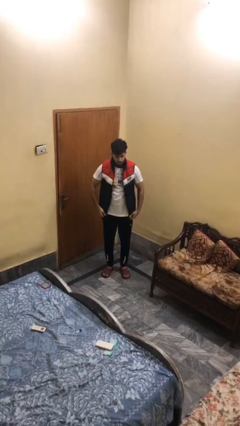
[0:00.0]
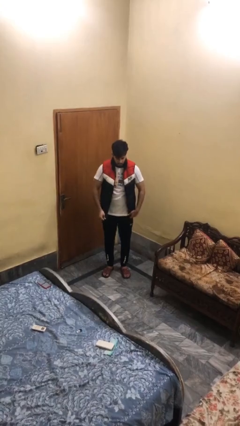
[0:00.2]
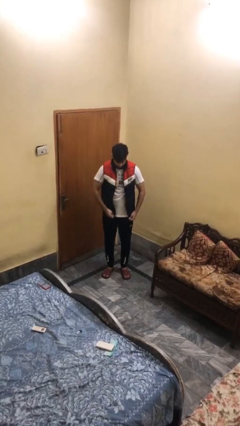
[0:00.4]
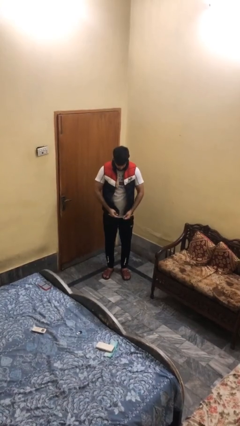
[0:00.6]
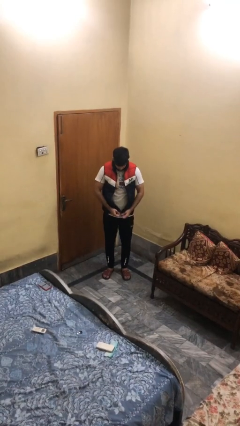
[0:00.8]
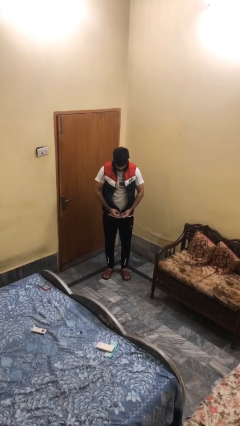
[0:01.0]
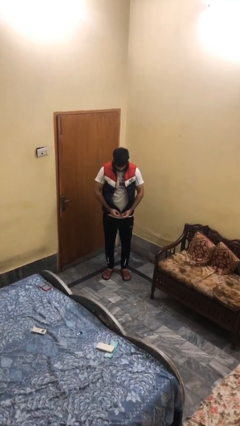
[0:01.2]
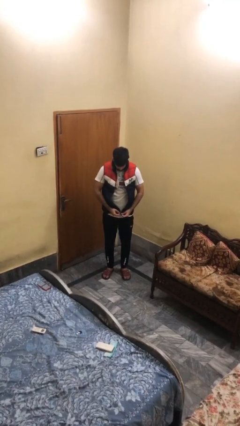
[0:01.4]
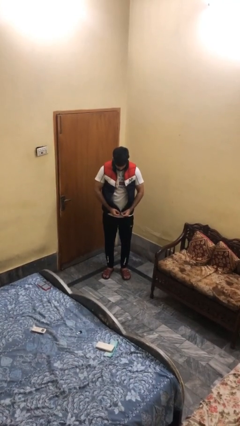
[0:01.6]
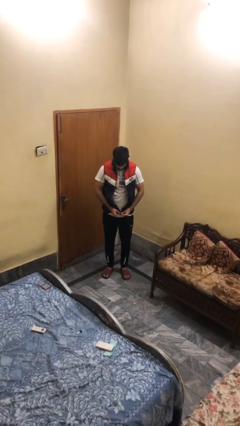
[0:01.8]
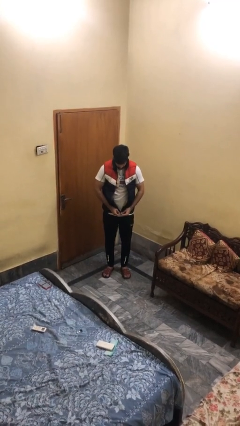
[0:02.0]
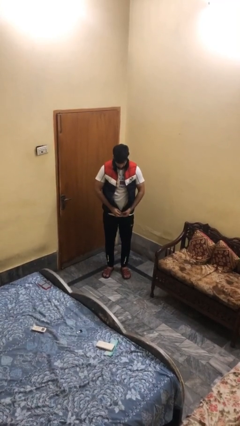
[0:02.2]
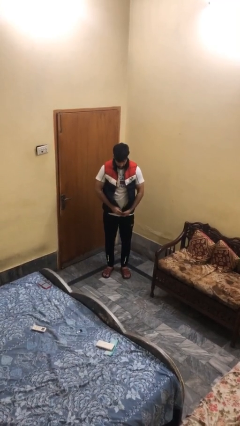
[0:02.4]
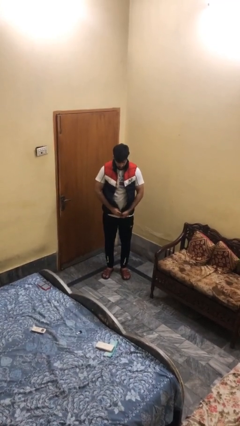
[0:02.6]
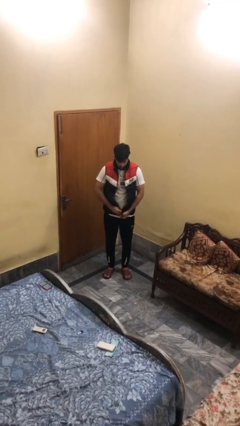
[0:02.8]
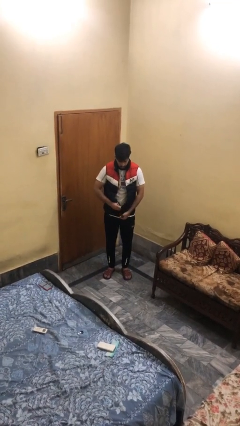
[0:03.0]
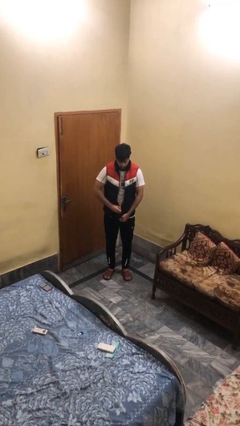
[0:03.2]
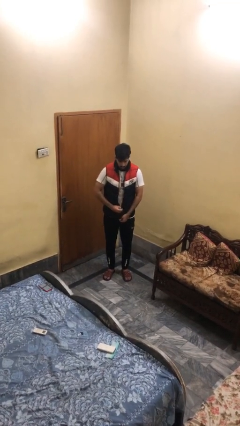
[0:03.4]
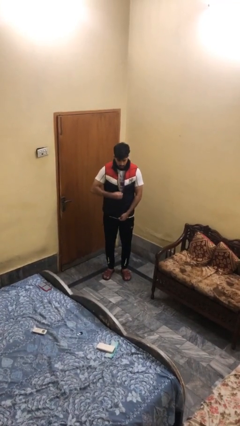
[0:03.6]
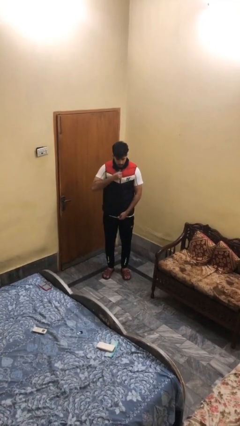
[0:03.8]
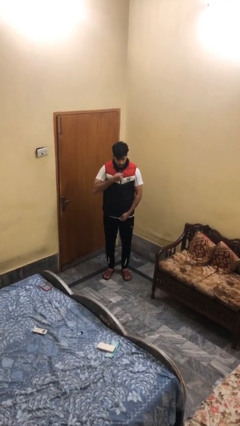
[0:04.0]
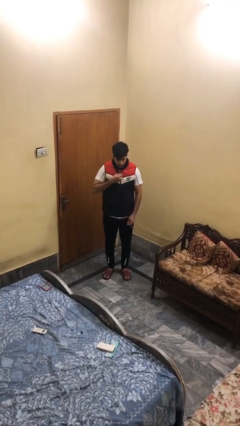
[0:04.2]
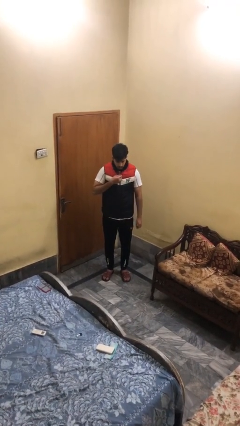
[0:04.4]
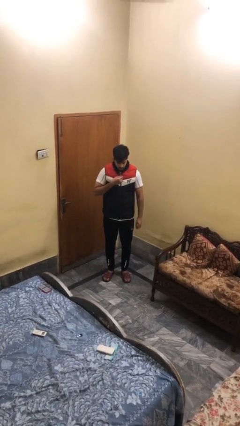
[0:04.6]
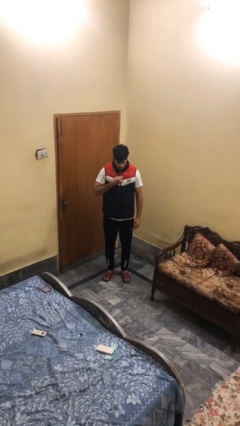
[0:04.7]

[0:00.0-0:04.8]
person zips up jacket

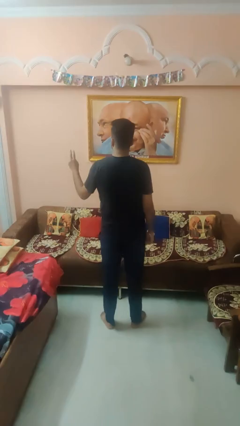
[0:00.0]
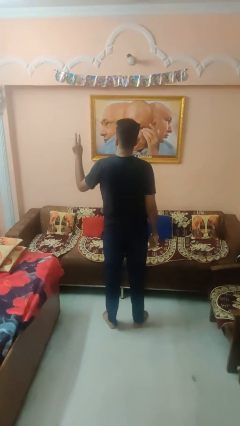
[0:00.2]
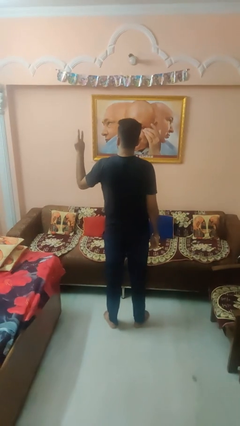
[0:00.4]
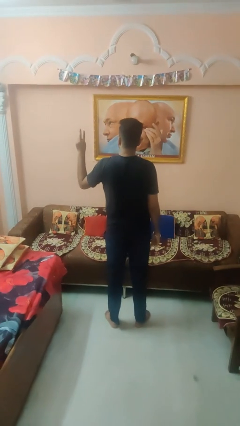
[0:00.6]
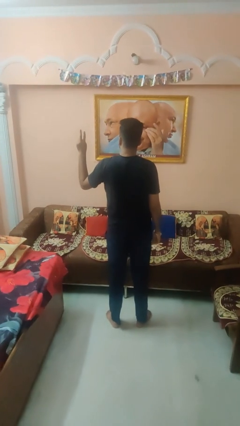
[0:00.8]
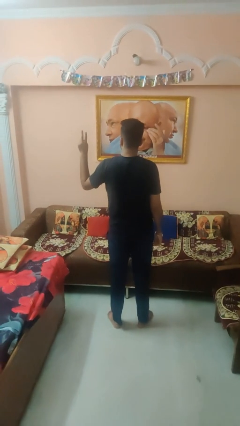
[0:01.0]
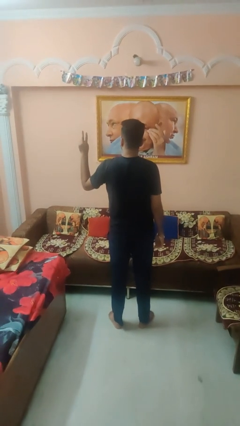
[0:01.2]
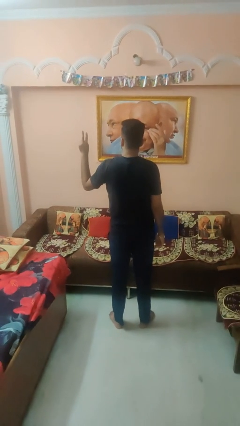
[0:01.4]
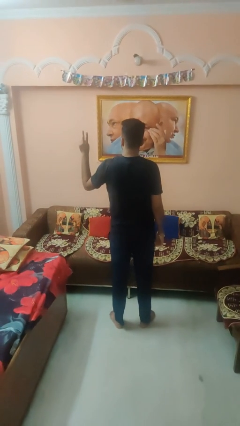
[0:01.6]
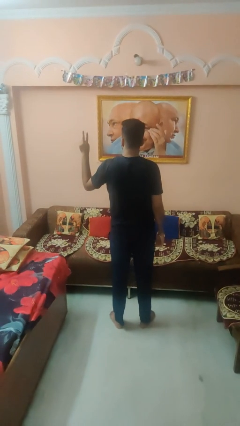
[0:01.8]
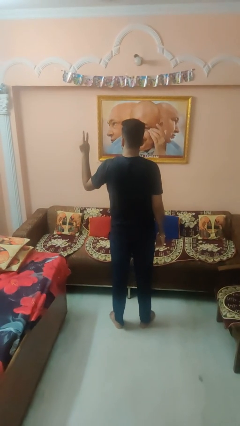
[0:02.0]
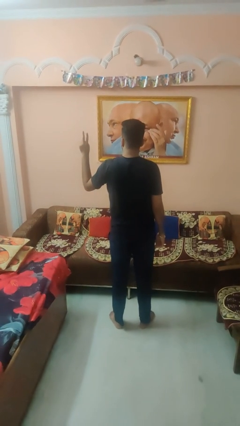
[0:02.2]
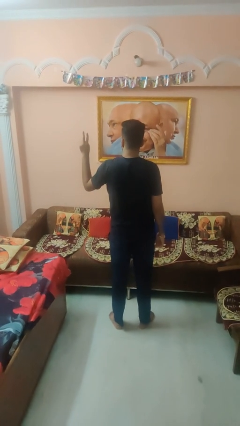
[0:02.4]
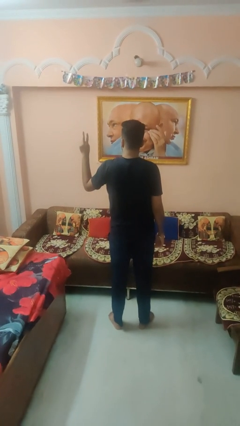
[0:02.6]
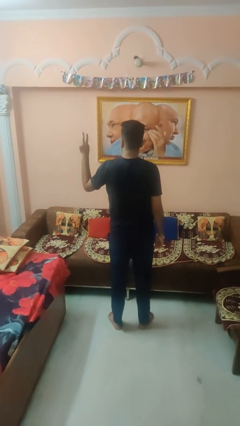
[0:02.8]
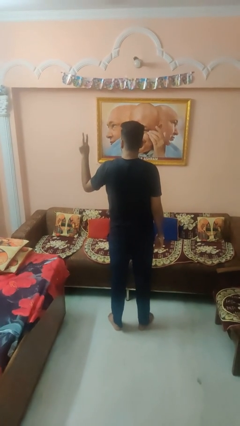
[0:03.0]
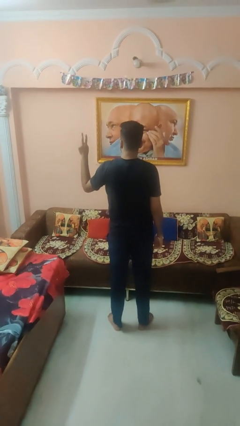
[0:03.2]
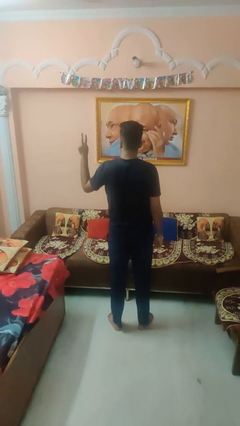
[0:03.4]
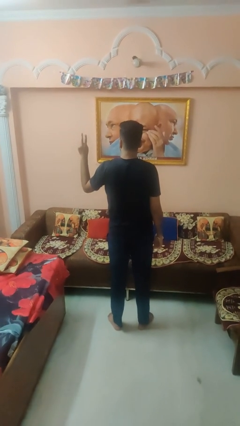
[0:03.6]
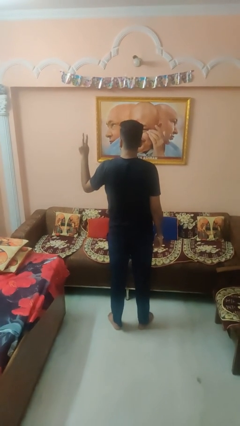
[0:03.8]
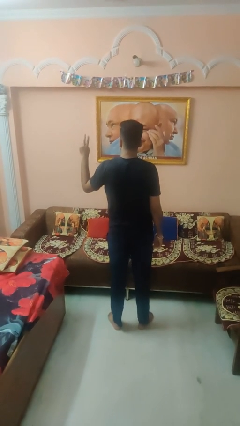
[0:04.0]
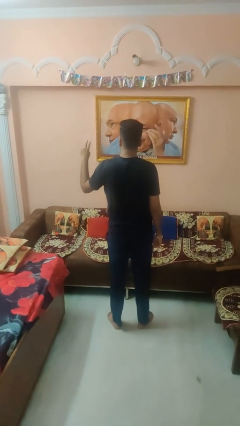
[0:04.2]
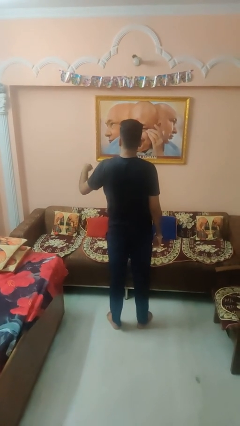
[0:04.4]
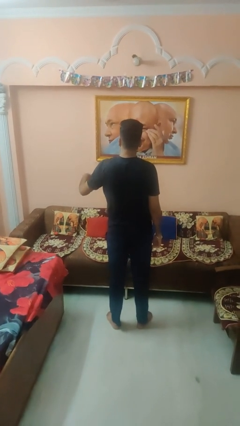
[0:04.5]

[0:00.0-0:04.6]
person gestures peace

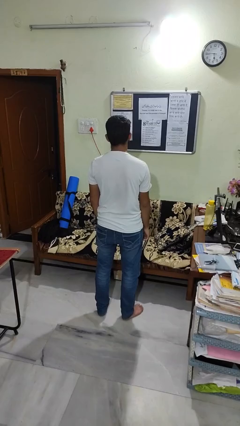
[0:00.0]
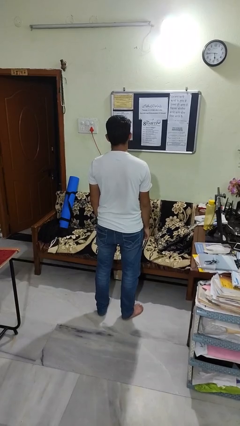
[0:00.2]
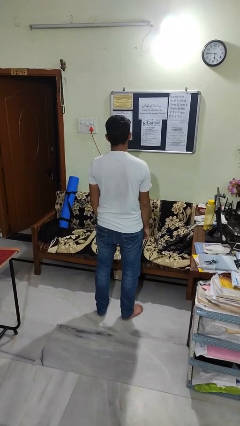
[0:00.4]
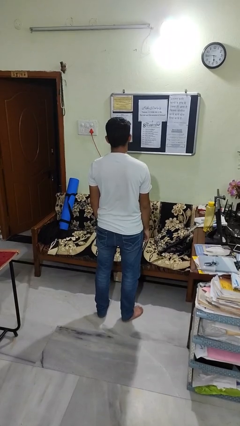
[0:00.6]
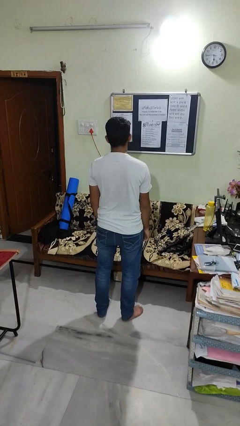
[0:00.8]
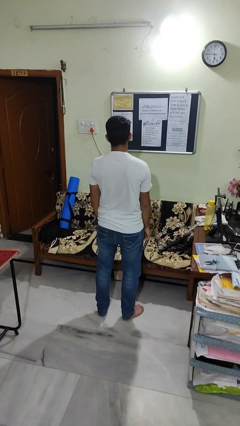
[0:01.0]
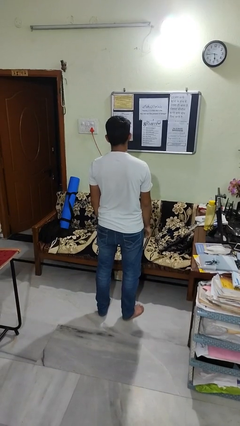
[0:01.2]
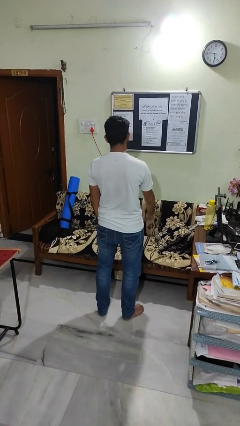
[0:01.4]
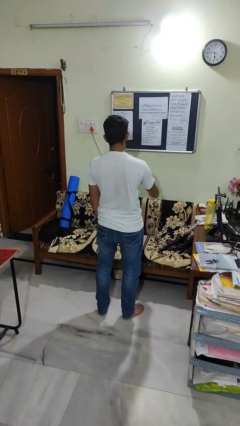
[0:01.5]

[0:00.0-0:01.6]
person gestures number one

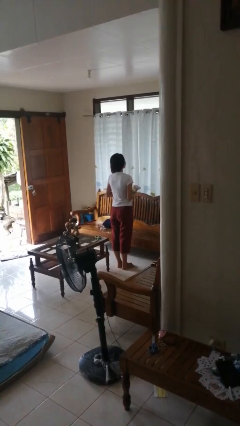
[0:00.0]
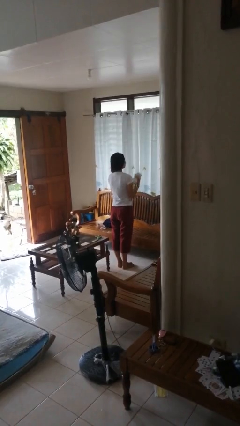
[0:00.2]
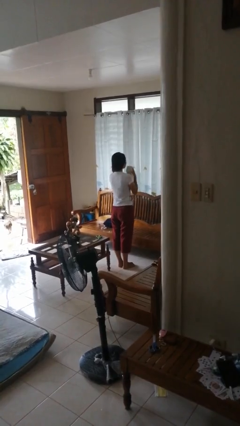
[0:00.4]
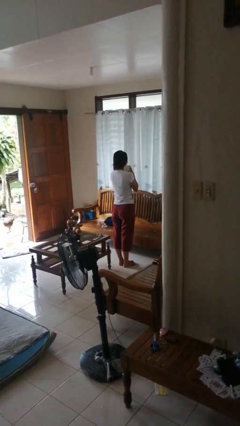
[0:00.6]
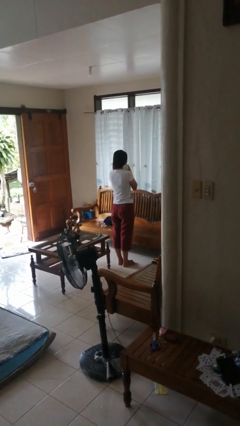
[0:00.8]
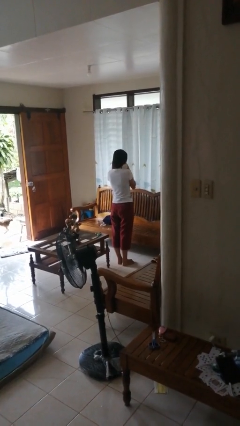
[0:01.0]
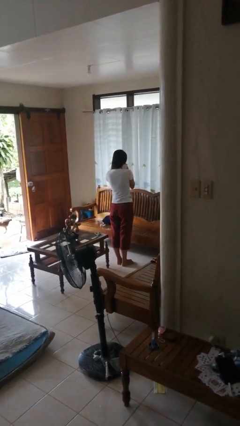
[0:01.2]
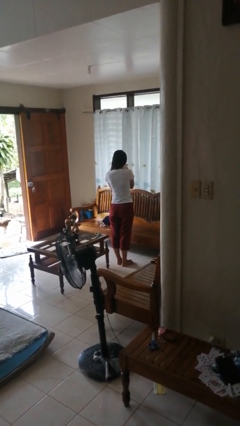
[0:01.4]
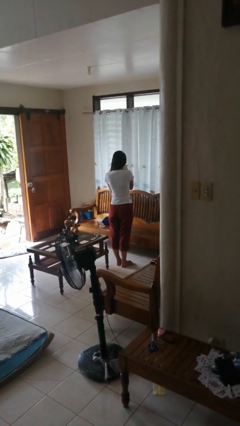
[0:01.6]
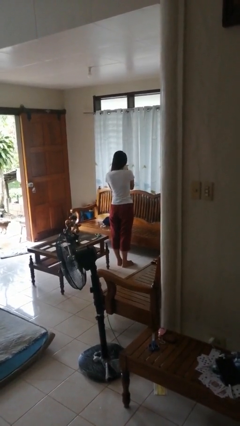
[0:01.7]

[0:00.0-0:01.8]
person hugs stuffed animal

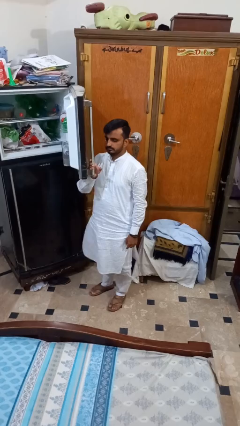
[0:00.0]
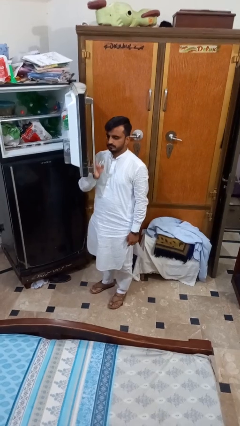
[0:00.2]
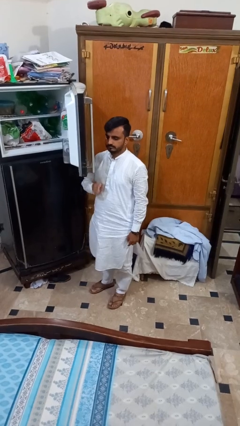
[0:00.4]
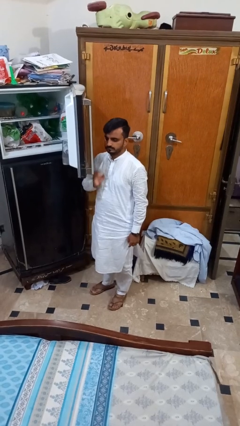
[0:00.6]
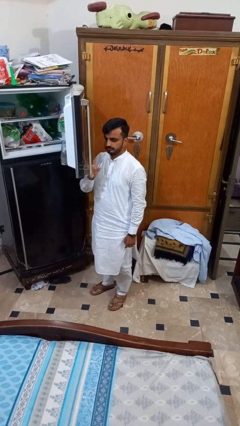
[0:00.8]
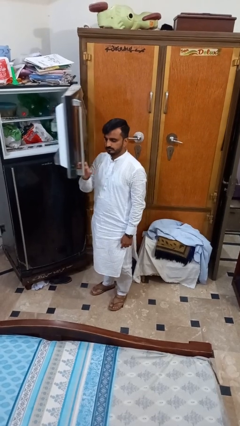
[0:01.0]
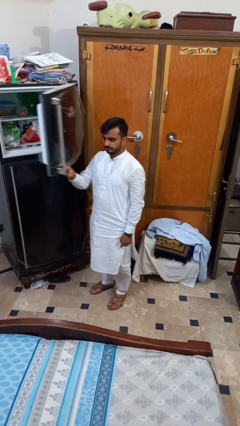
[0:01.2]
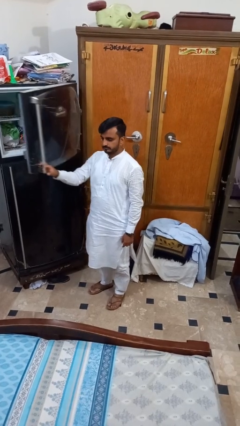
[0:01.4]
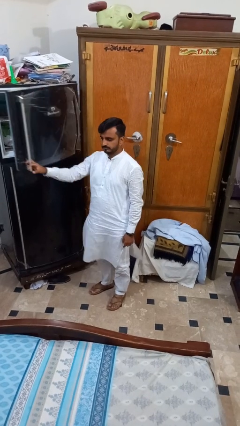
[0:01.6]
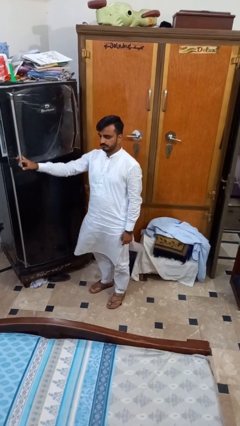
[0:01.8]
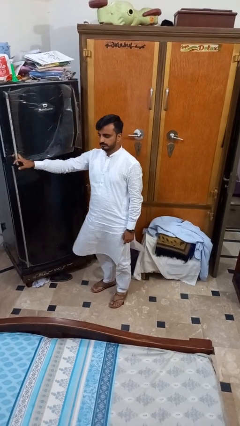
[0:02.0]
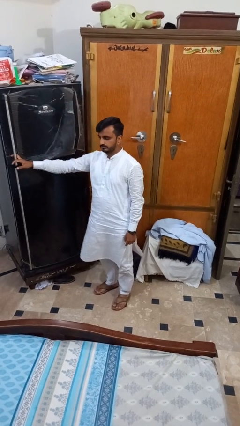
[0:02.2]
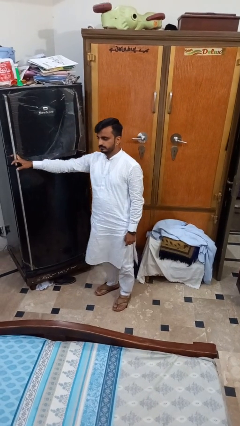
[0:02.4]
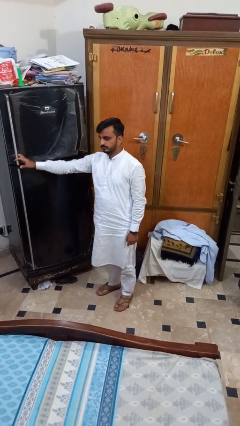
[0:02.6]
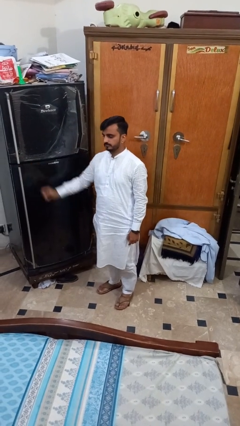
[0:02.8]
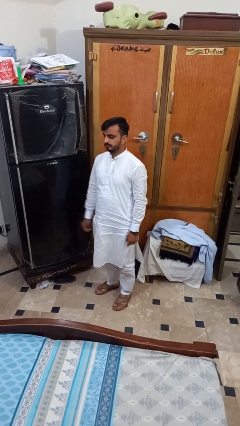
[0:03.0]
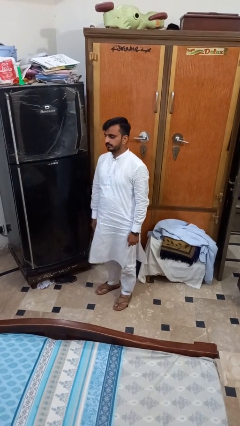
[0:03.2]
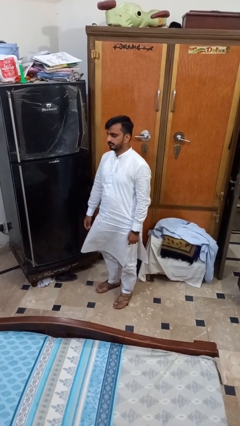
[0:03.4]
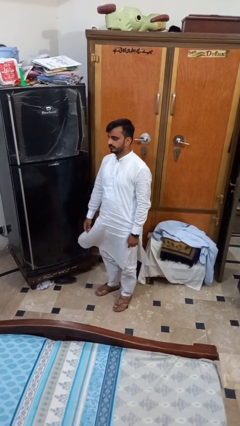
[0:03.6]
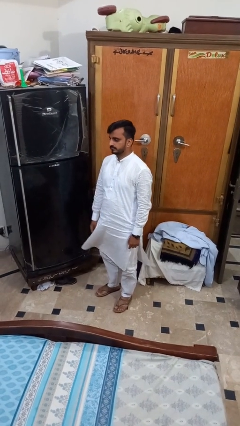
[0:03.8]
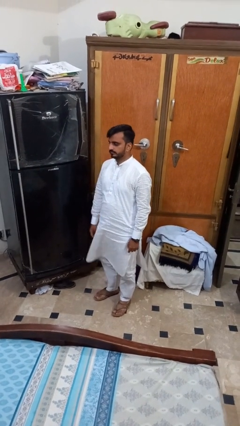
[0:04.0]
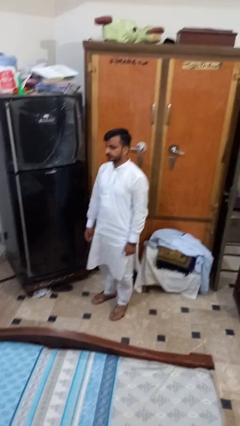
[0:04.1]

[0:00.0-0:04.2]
person closes refrigerator

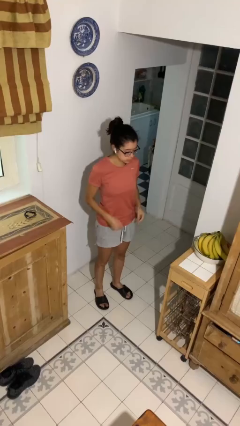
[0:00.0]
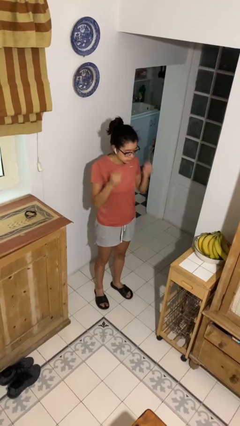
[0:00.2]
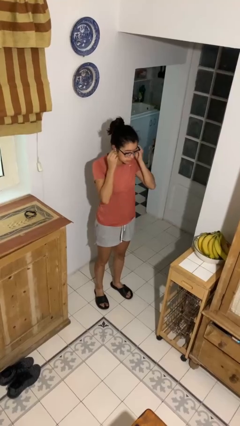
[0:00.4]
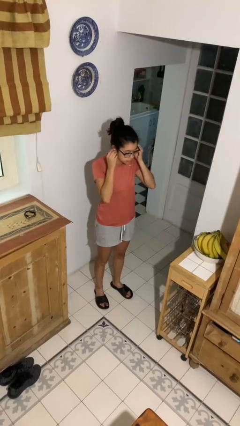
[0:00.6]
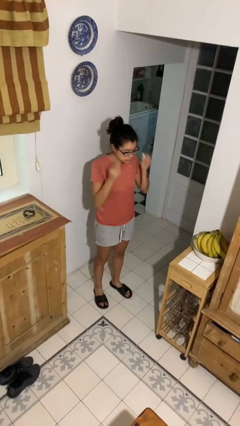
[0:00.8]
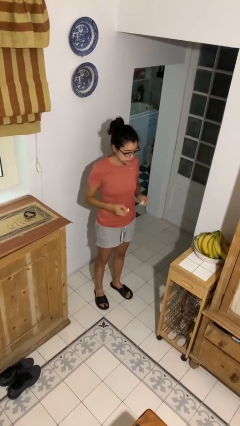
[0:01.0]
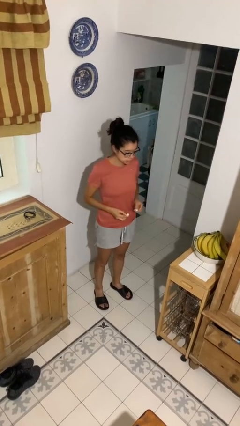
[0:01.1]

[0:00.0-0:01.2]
person takes off headphones
